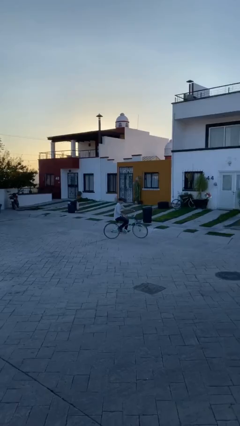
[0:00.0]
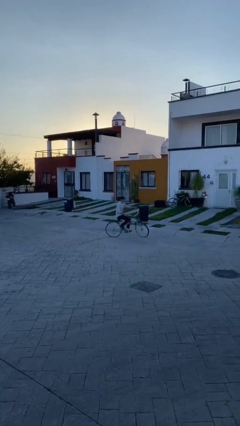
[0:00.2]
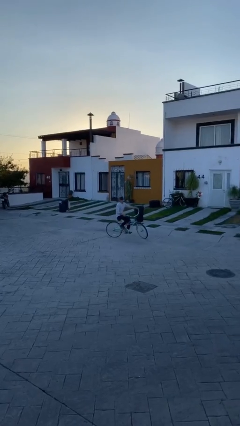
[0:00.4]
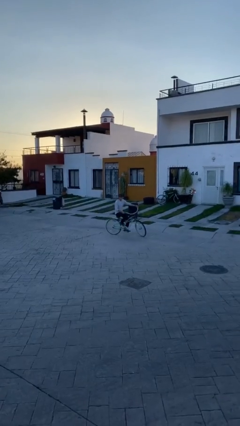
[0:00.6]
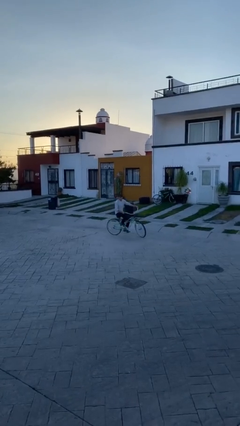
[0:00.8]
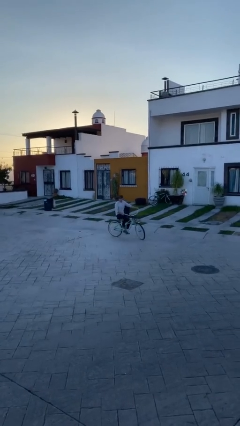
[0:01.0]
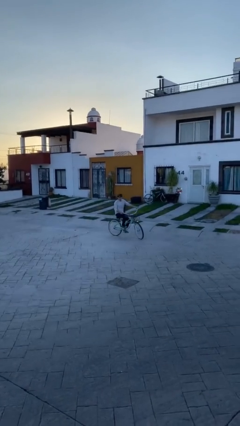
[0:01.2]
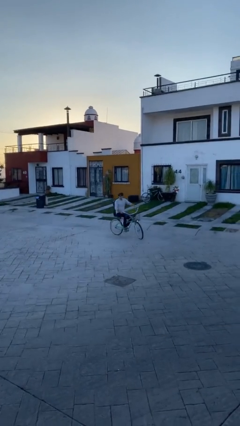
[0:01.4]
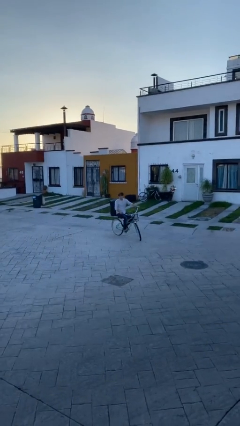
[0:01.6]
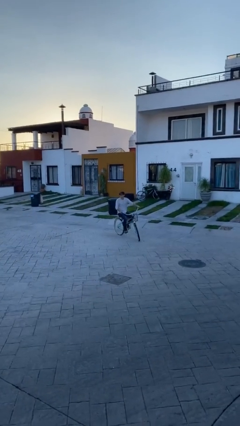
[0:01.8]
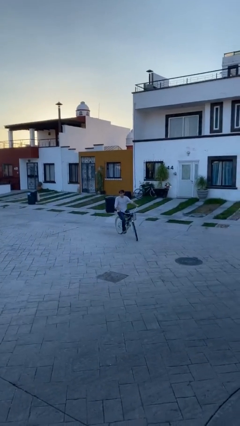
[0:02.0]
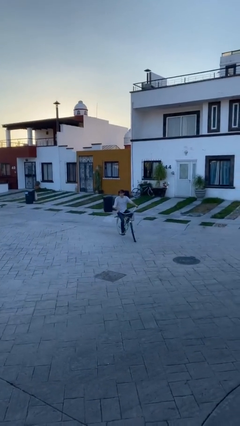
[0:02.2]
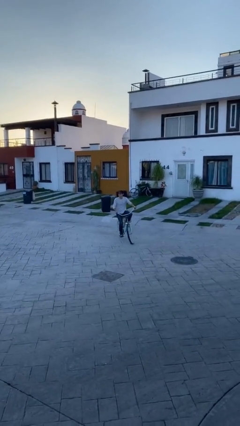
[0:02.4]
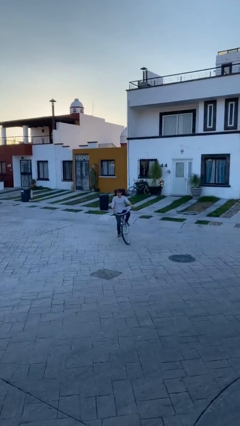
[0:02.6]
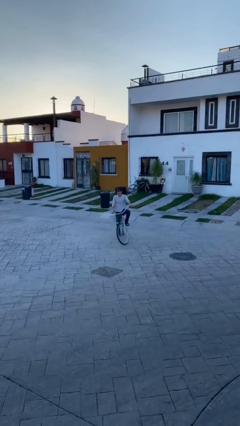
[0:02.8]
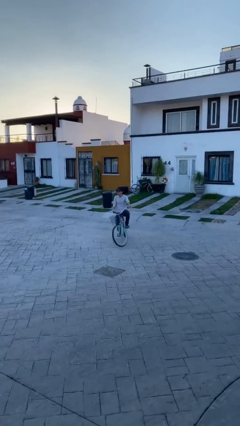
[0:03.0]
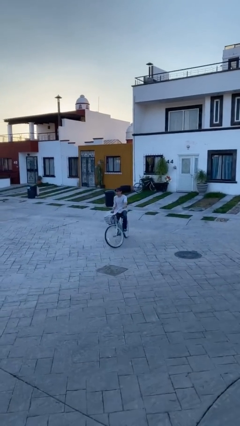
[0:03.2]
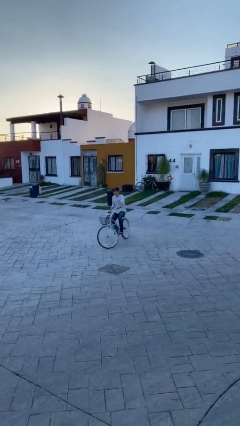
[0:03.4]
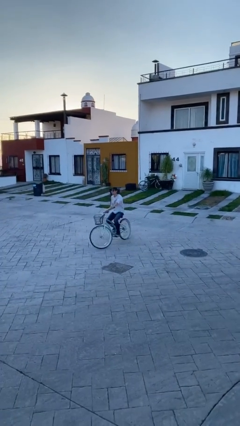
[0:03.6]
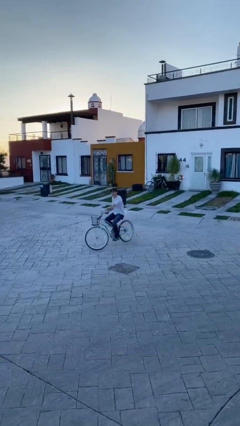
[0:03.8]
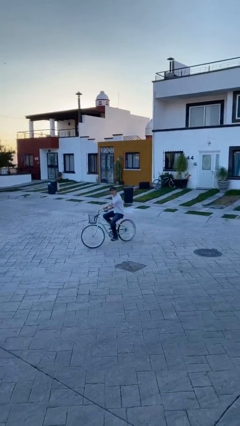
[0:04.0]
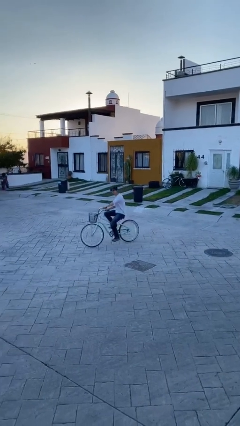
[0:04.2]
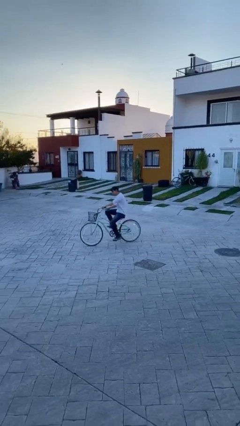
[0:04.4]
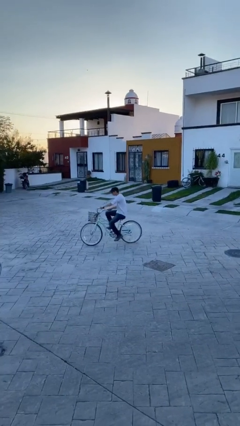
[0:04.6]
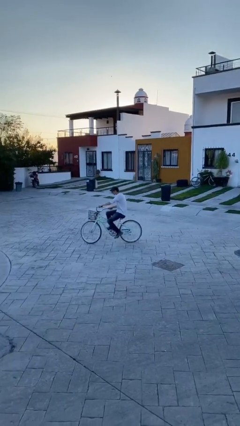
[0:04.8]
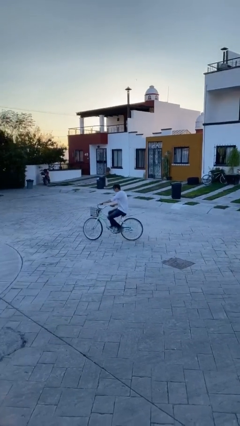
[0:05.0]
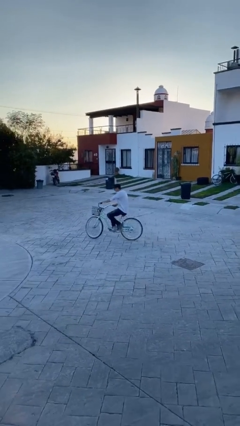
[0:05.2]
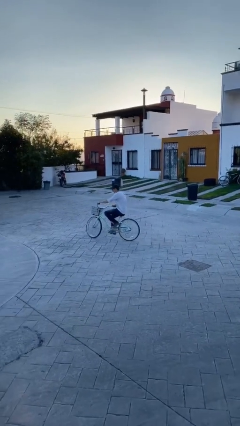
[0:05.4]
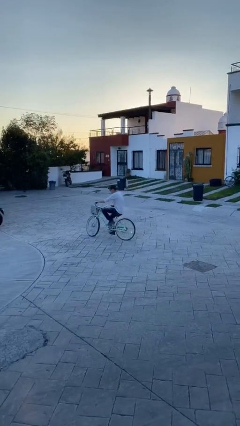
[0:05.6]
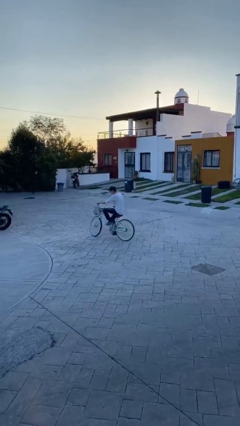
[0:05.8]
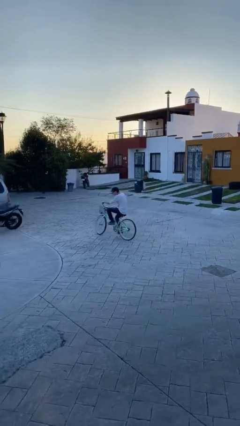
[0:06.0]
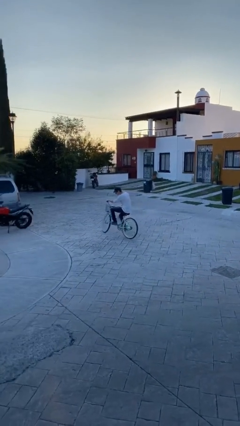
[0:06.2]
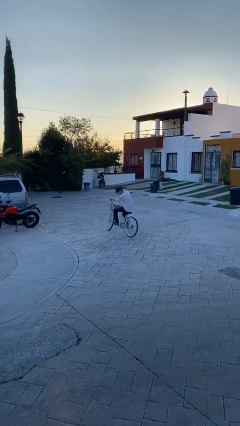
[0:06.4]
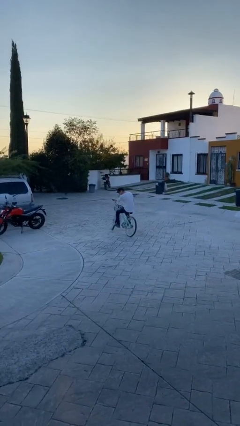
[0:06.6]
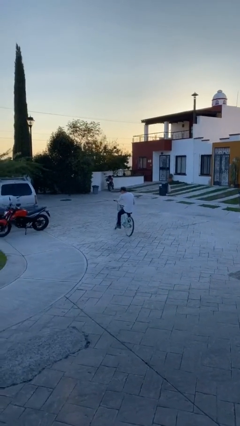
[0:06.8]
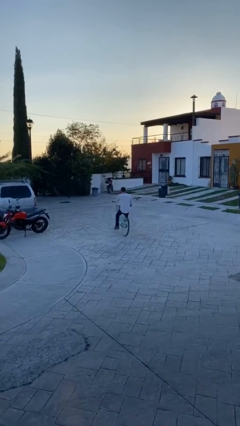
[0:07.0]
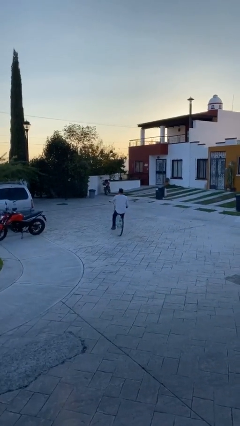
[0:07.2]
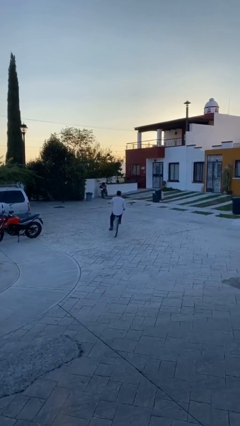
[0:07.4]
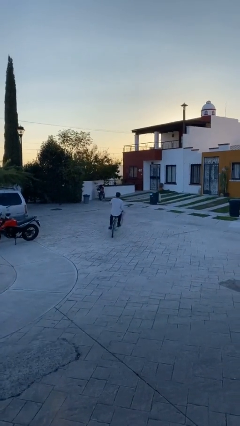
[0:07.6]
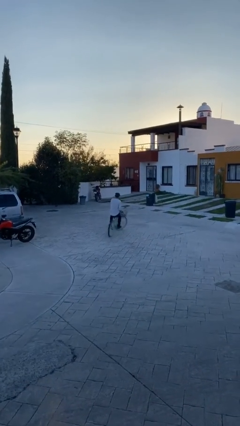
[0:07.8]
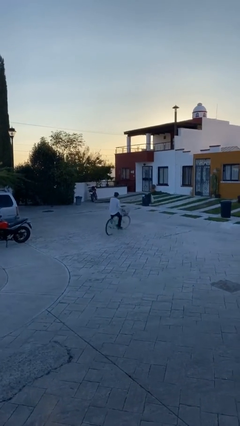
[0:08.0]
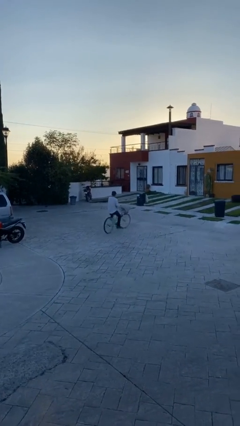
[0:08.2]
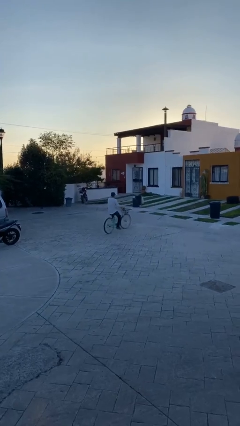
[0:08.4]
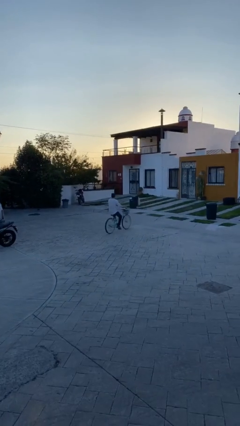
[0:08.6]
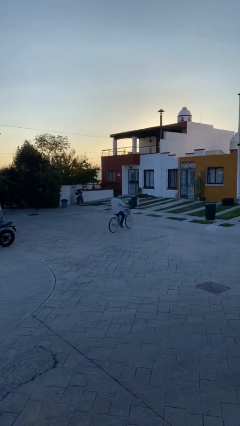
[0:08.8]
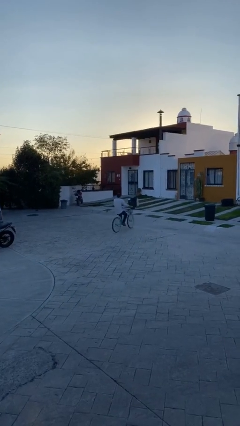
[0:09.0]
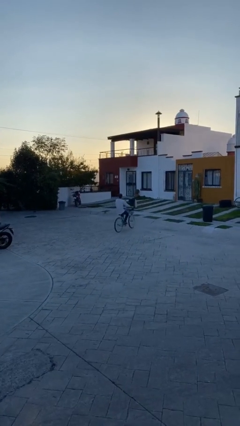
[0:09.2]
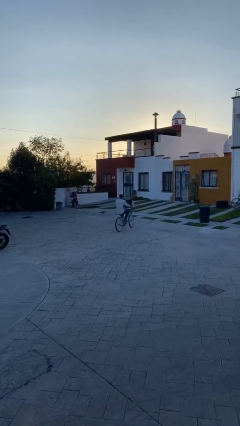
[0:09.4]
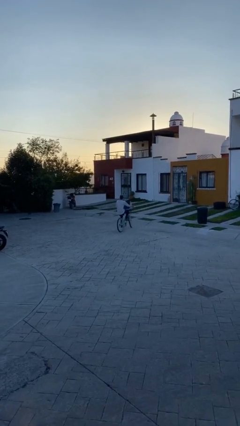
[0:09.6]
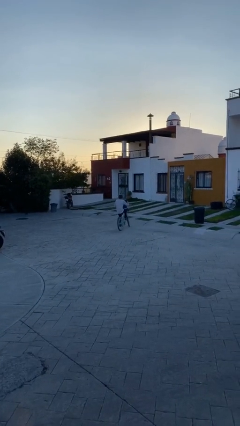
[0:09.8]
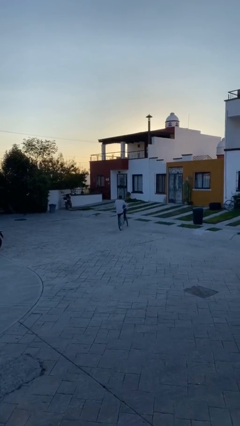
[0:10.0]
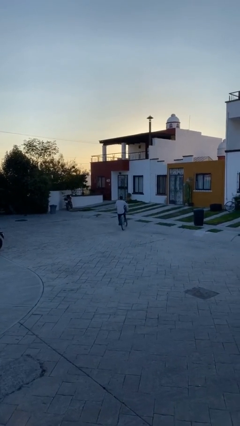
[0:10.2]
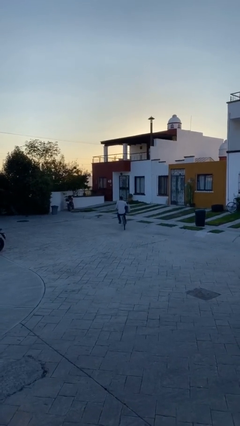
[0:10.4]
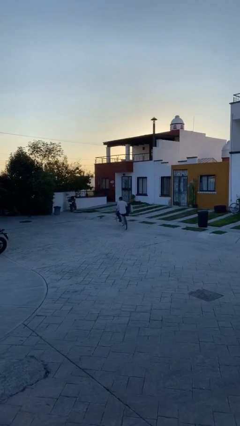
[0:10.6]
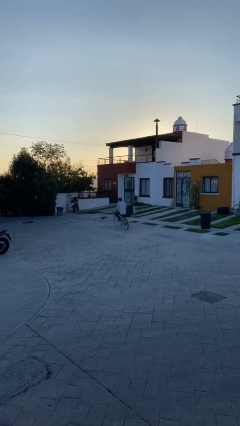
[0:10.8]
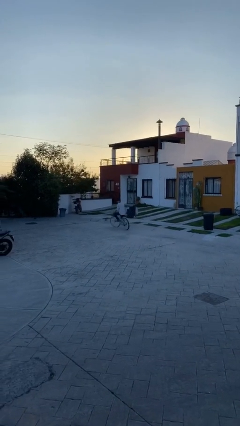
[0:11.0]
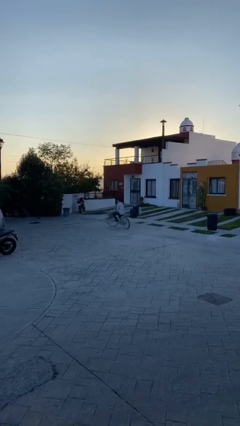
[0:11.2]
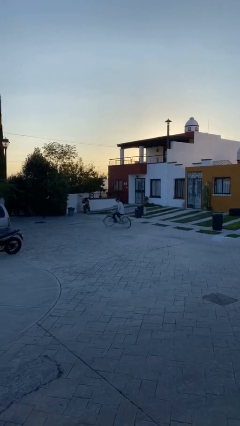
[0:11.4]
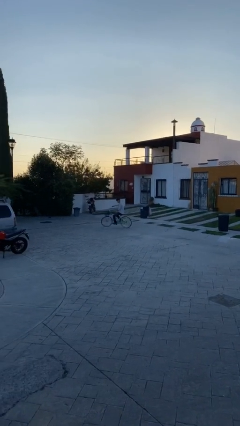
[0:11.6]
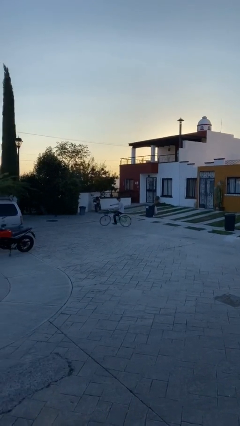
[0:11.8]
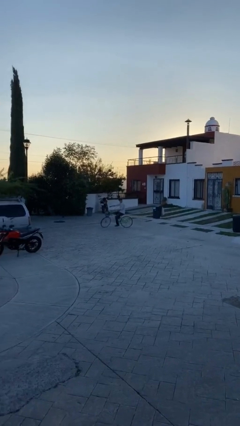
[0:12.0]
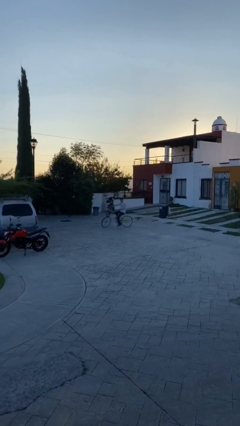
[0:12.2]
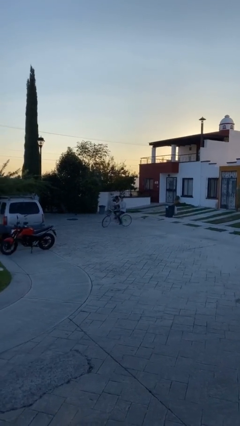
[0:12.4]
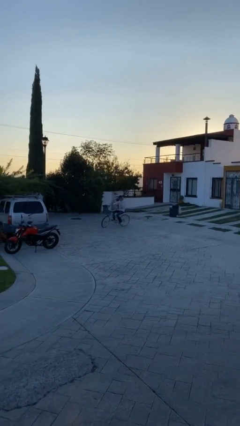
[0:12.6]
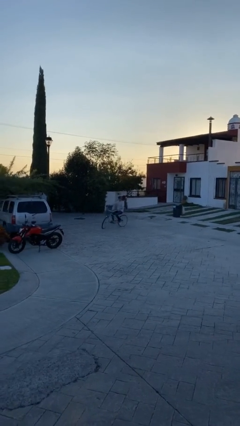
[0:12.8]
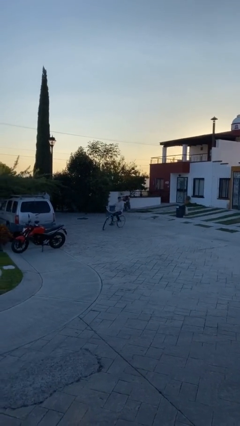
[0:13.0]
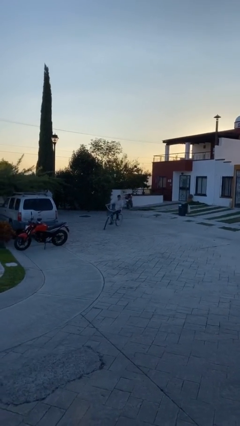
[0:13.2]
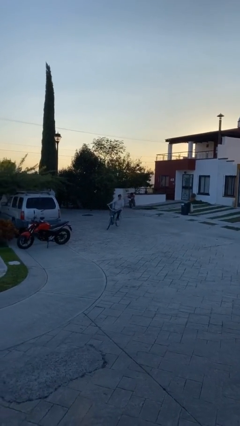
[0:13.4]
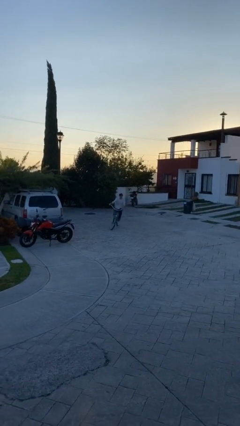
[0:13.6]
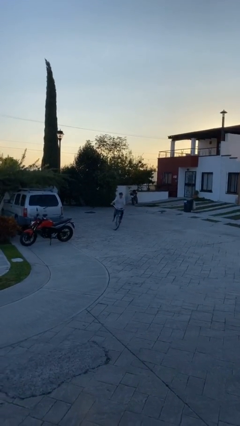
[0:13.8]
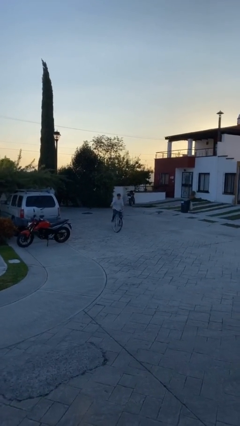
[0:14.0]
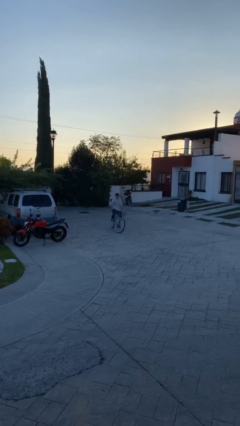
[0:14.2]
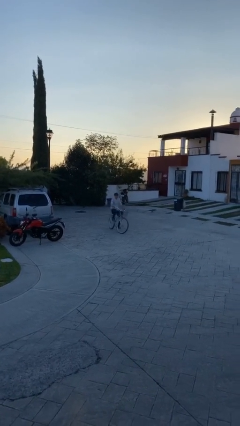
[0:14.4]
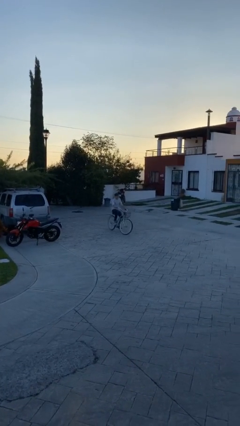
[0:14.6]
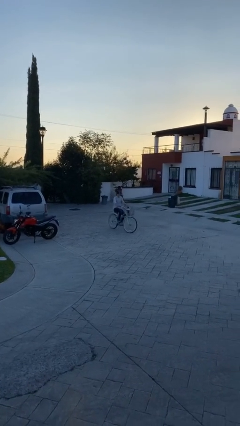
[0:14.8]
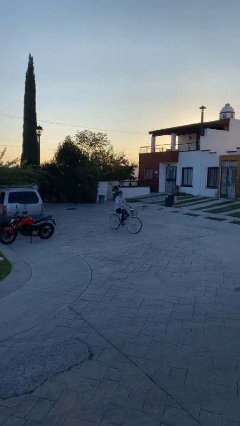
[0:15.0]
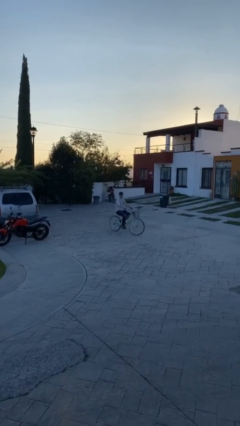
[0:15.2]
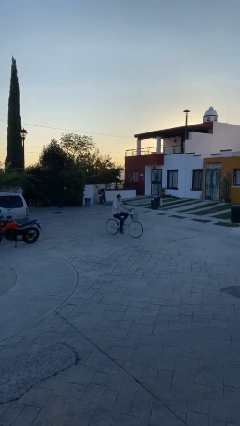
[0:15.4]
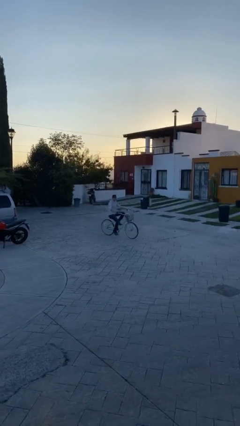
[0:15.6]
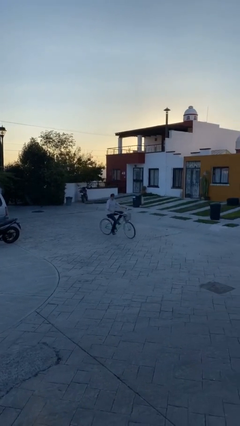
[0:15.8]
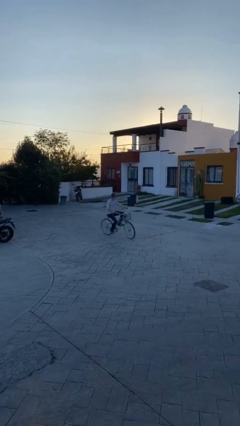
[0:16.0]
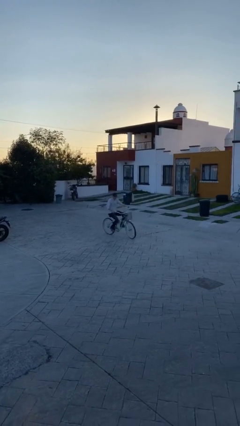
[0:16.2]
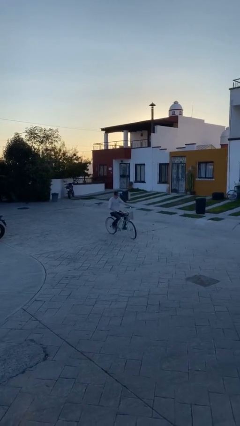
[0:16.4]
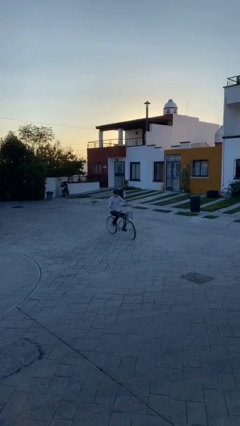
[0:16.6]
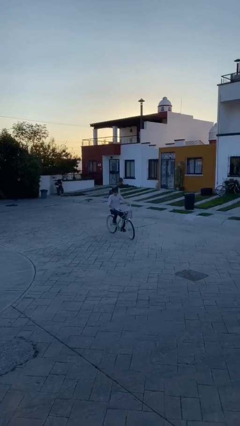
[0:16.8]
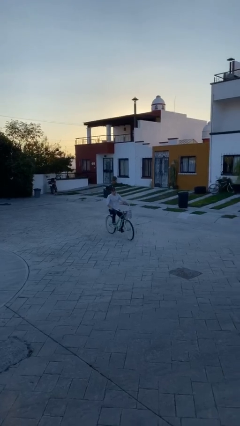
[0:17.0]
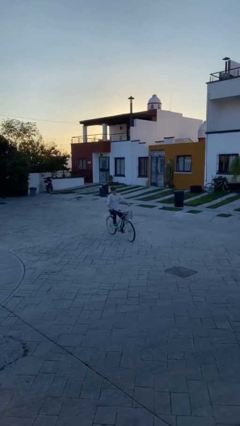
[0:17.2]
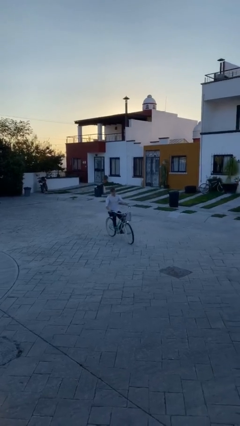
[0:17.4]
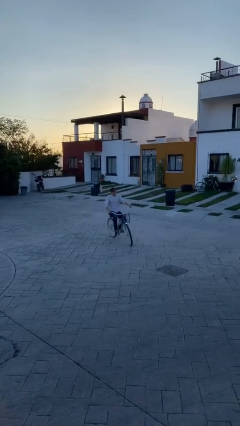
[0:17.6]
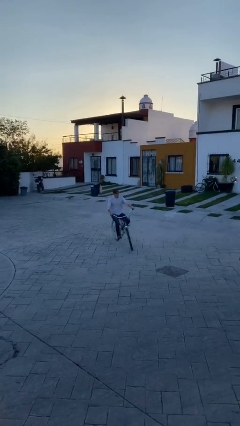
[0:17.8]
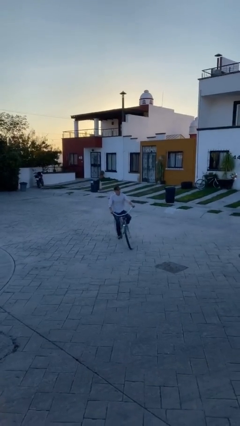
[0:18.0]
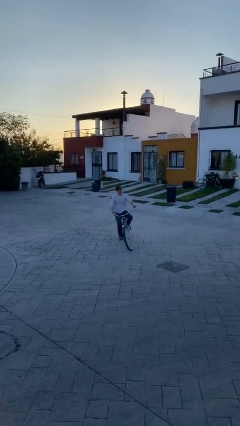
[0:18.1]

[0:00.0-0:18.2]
person rides bicycle

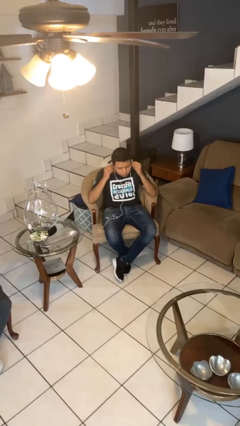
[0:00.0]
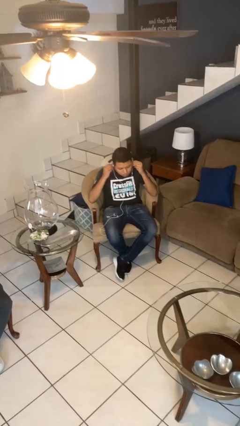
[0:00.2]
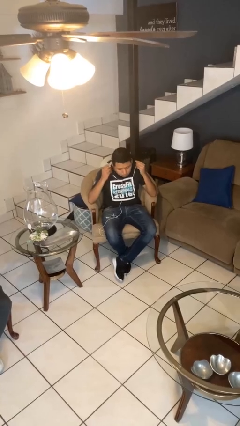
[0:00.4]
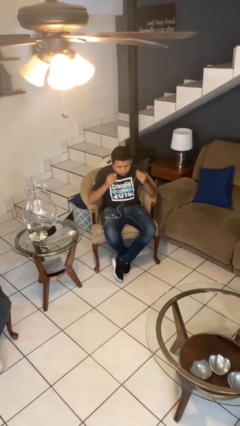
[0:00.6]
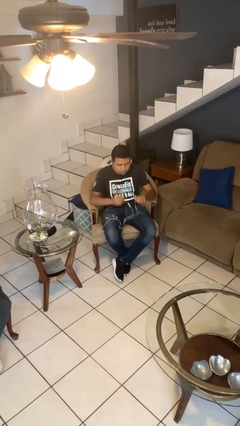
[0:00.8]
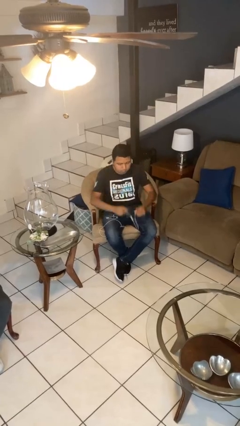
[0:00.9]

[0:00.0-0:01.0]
person takes off headphones
